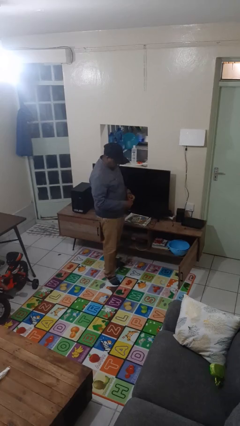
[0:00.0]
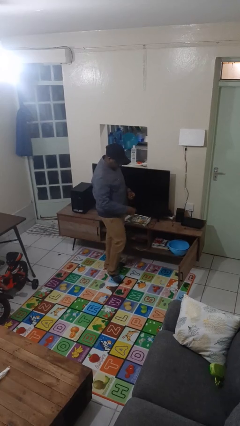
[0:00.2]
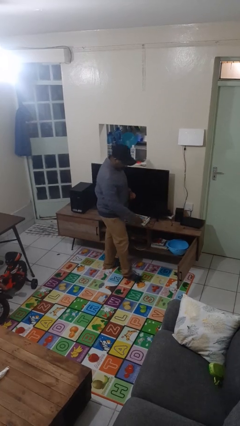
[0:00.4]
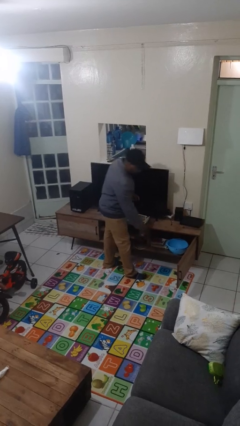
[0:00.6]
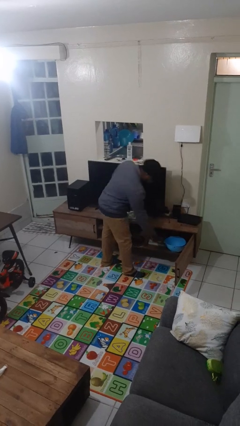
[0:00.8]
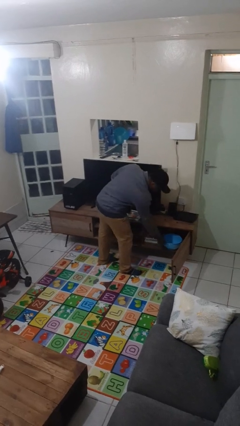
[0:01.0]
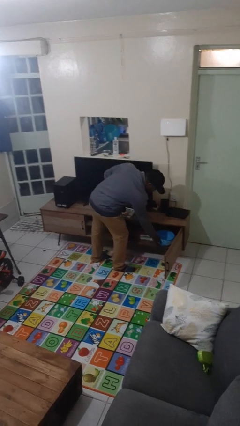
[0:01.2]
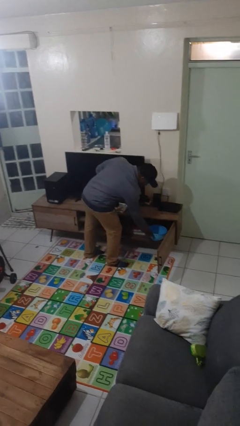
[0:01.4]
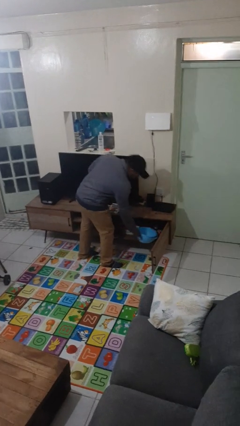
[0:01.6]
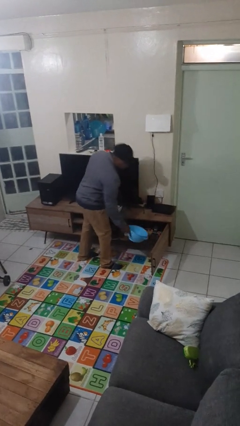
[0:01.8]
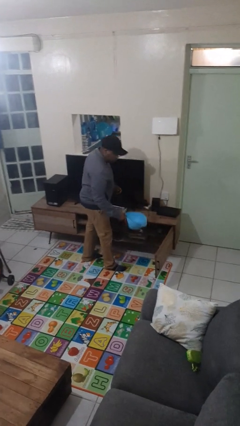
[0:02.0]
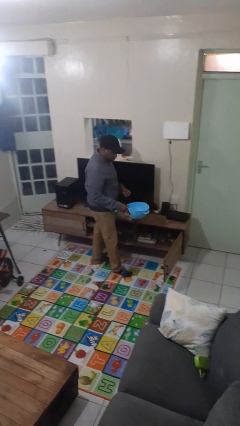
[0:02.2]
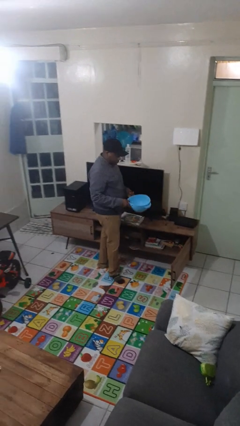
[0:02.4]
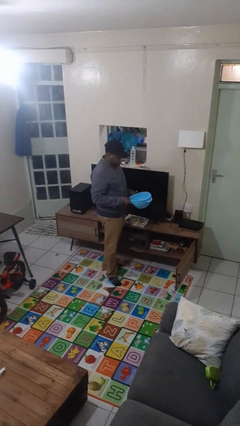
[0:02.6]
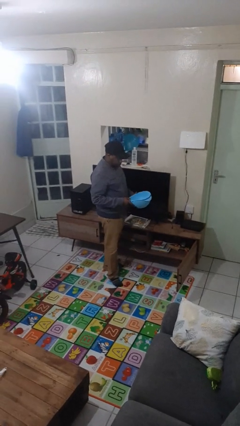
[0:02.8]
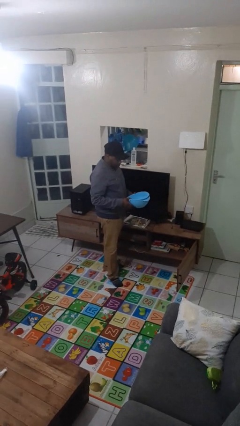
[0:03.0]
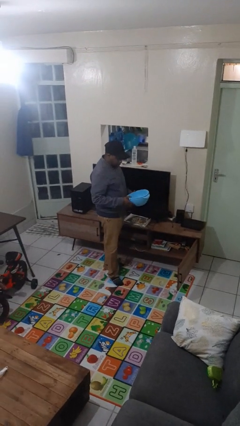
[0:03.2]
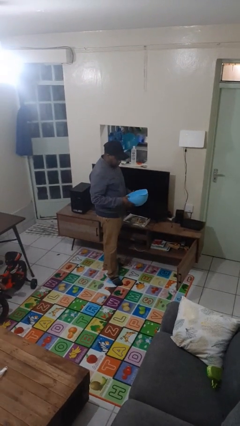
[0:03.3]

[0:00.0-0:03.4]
person picks up object from cabinet

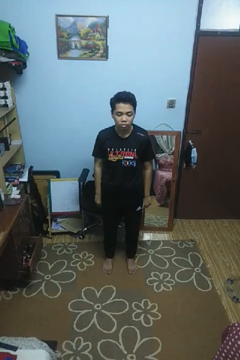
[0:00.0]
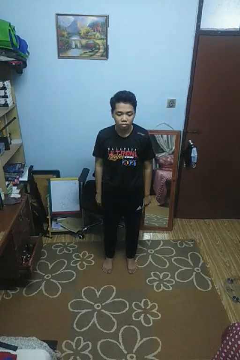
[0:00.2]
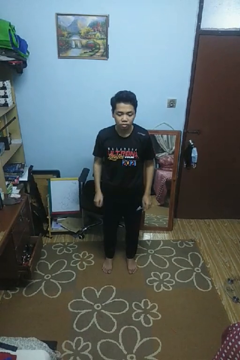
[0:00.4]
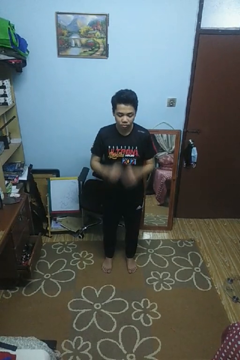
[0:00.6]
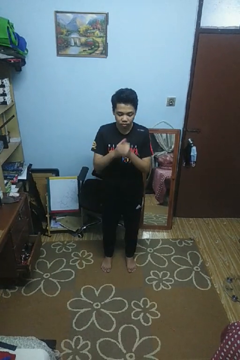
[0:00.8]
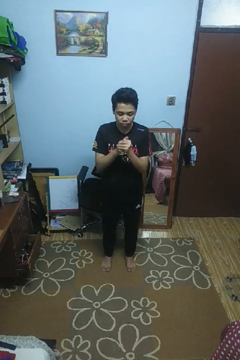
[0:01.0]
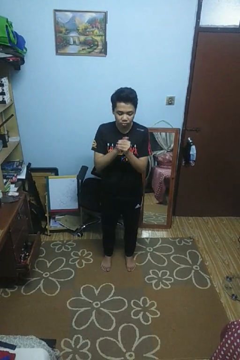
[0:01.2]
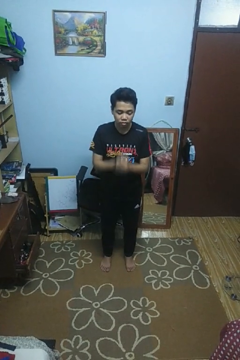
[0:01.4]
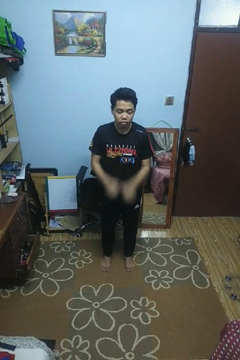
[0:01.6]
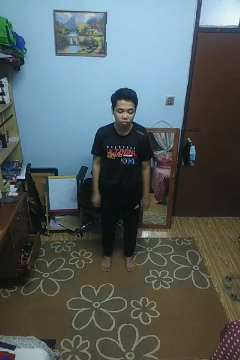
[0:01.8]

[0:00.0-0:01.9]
person cracks knuckles

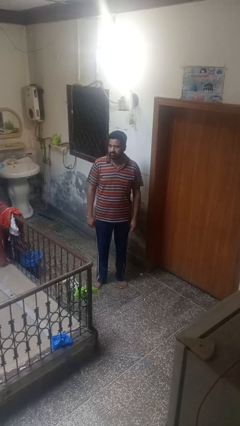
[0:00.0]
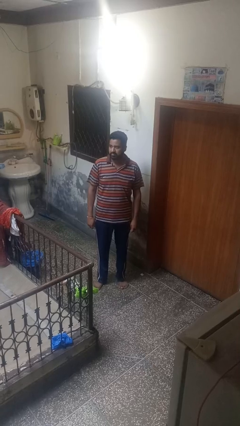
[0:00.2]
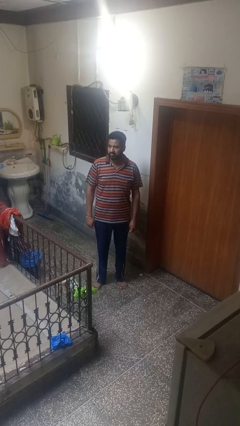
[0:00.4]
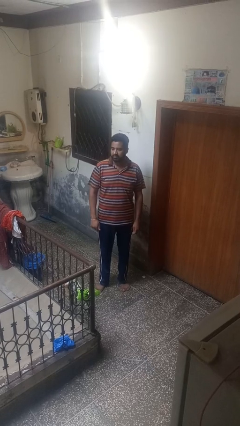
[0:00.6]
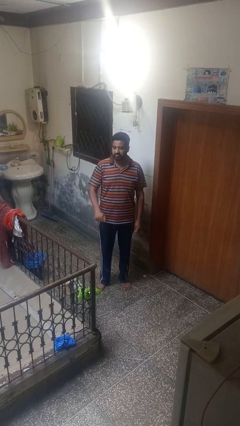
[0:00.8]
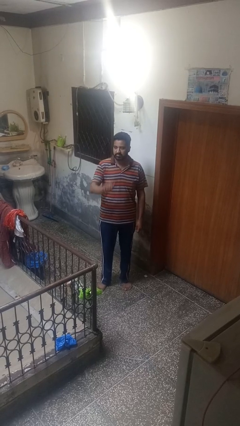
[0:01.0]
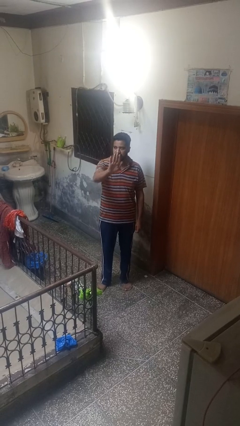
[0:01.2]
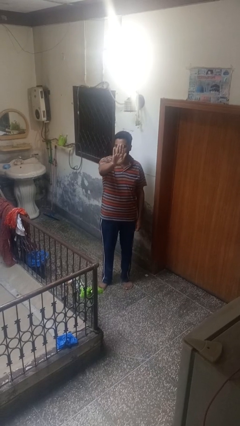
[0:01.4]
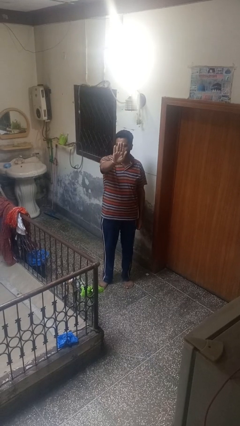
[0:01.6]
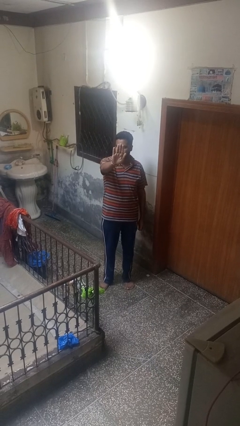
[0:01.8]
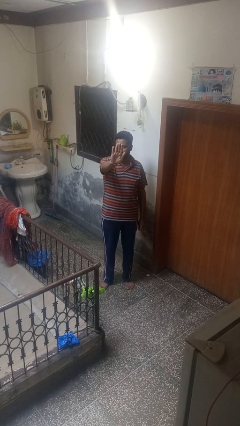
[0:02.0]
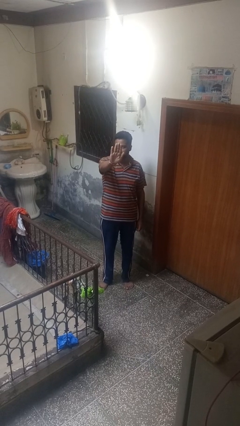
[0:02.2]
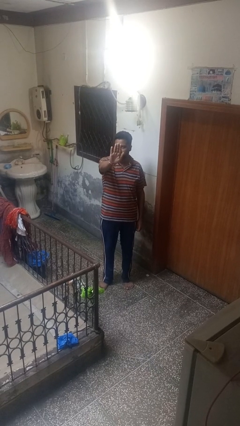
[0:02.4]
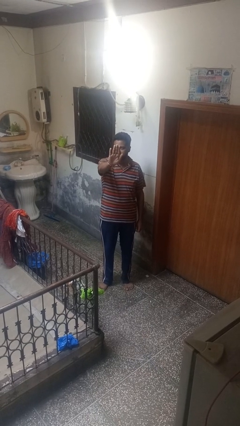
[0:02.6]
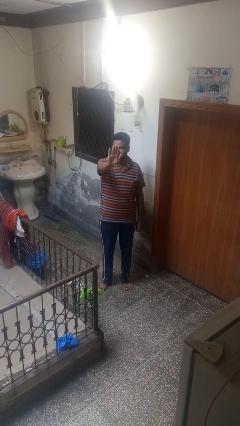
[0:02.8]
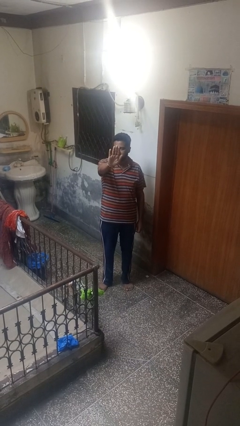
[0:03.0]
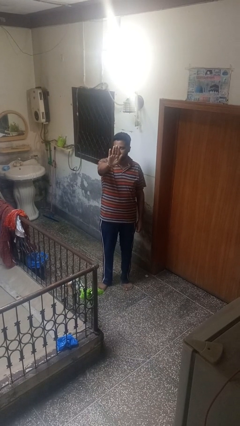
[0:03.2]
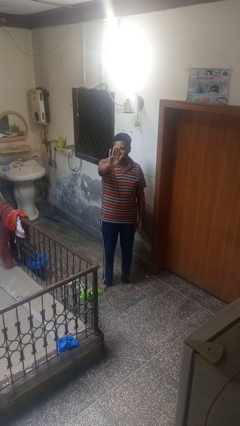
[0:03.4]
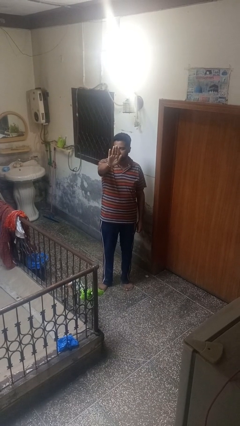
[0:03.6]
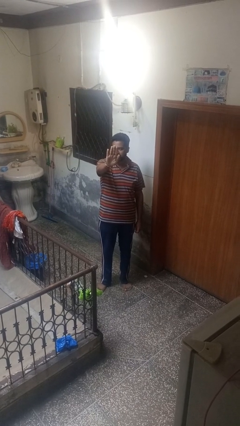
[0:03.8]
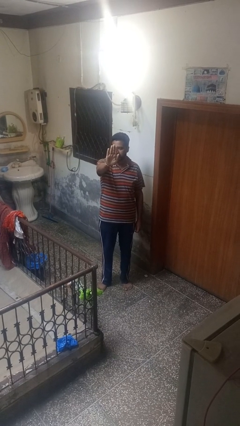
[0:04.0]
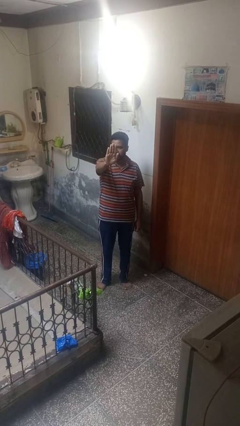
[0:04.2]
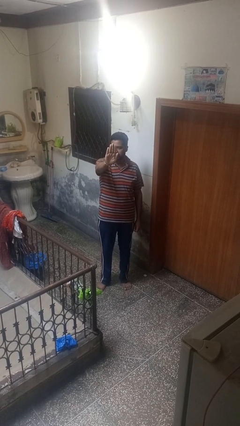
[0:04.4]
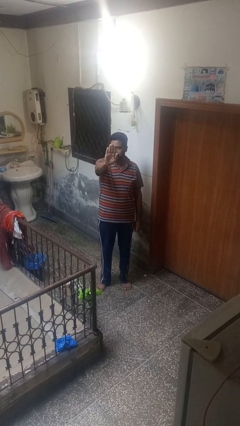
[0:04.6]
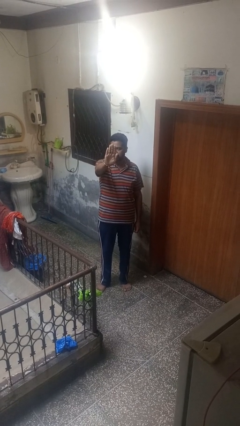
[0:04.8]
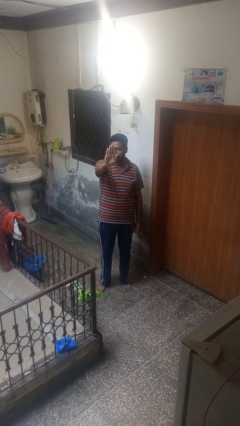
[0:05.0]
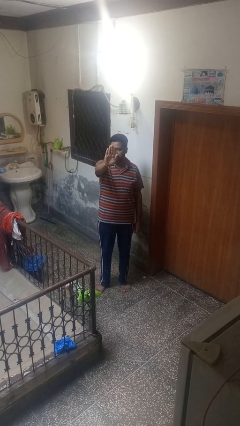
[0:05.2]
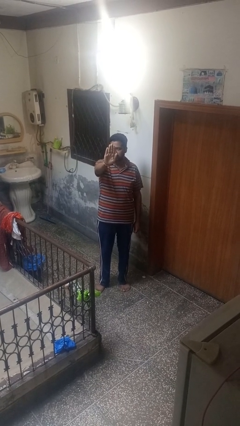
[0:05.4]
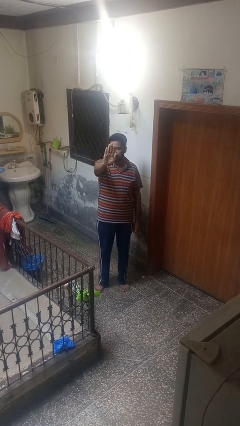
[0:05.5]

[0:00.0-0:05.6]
person gestures stop

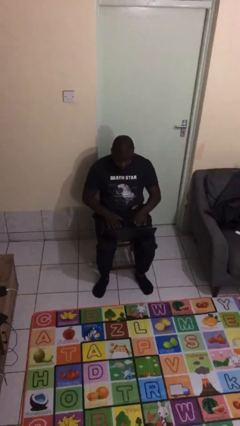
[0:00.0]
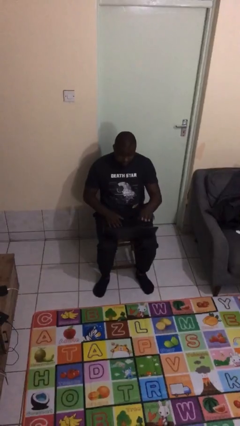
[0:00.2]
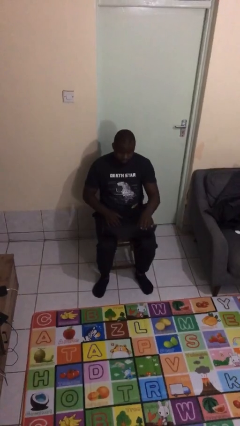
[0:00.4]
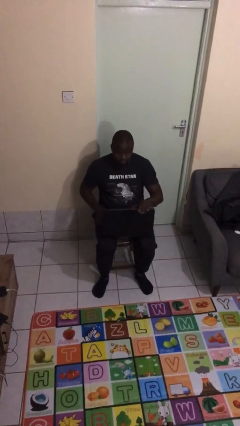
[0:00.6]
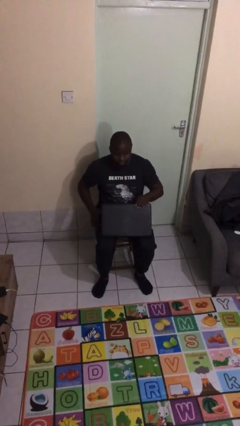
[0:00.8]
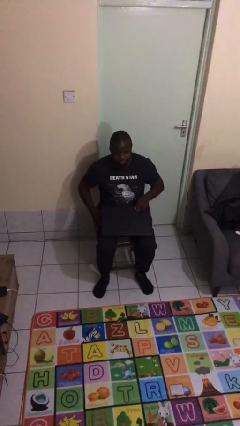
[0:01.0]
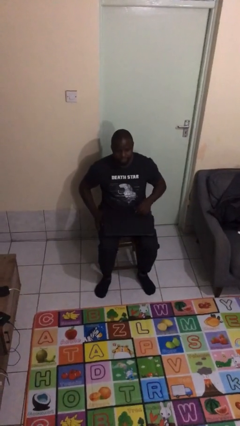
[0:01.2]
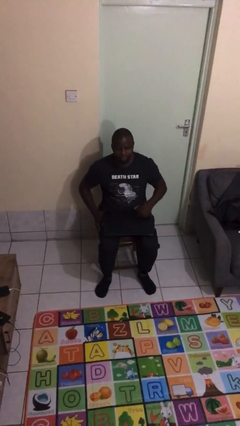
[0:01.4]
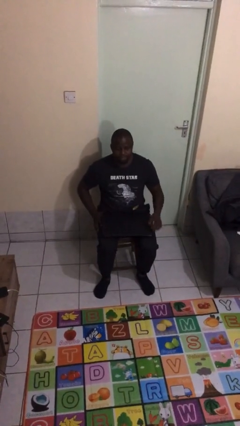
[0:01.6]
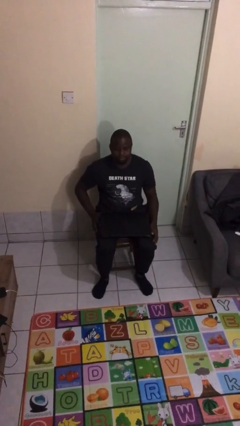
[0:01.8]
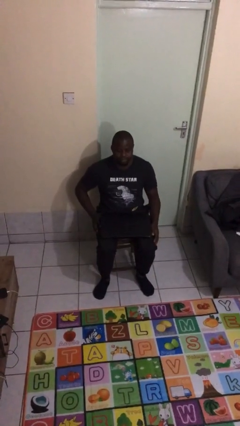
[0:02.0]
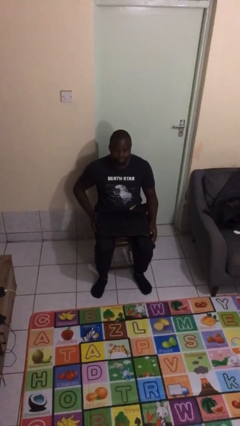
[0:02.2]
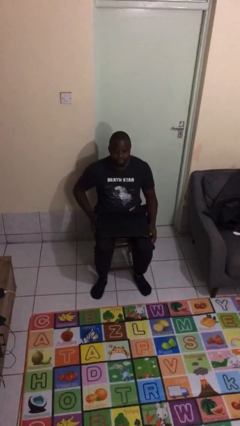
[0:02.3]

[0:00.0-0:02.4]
person closes laptop

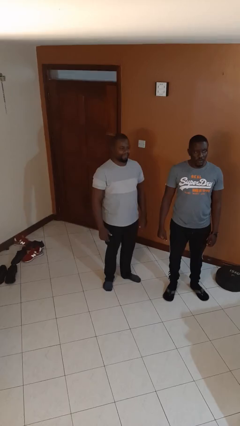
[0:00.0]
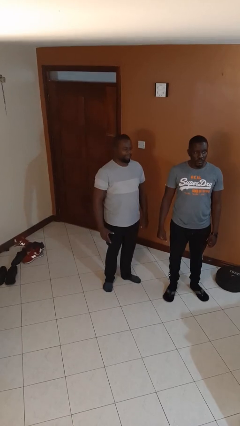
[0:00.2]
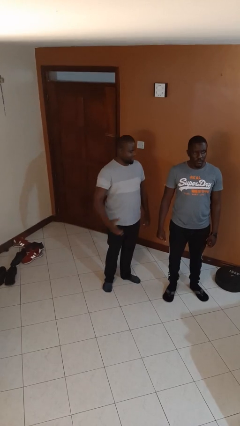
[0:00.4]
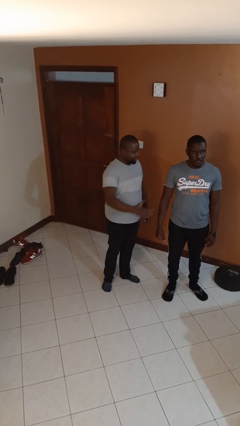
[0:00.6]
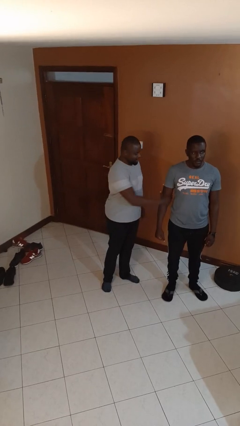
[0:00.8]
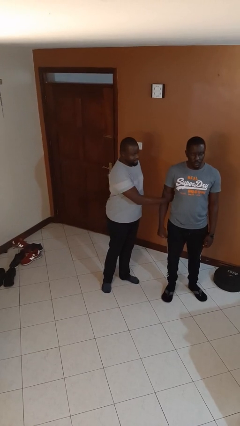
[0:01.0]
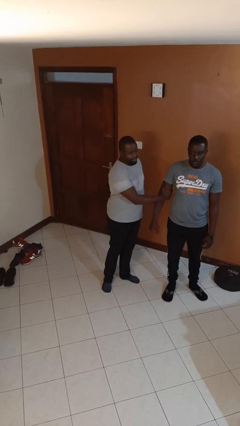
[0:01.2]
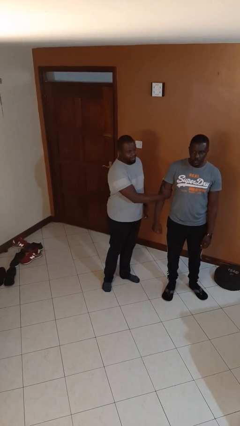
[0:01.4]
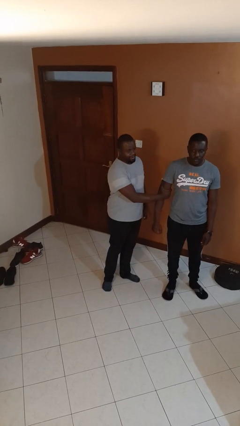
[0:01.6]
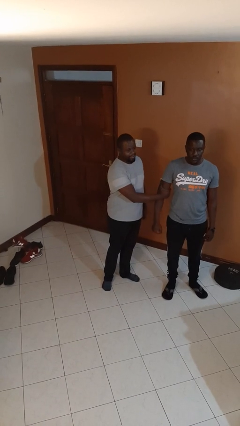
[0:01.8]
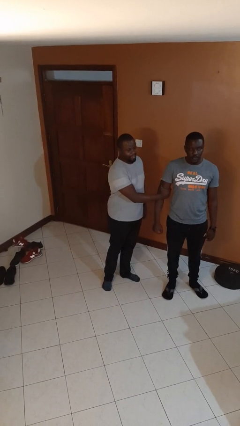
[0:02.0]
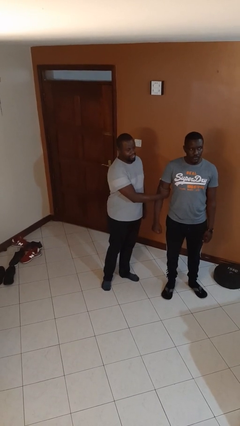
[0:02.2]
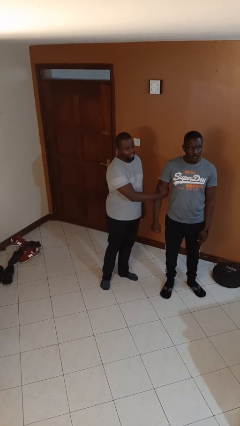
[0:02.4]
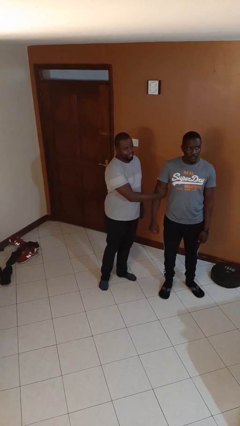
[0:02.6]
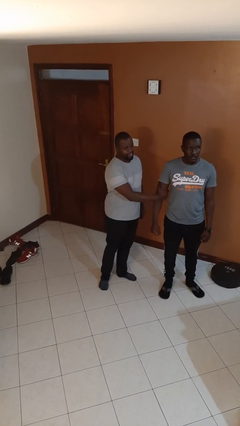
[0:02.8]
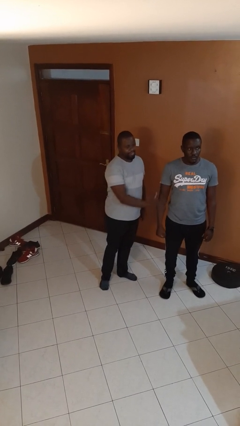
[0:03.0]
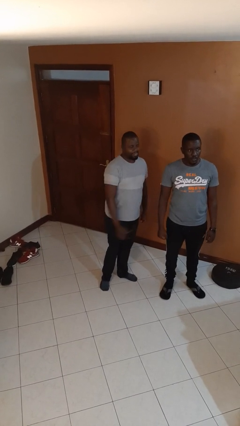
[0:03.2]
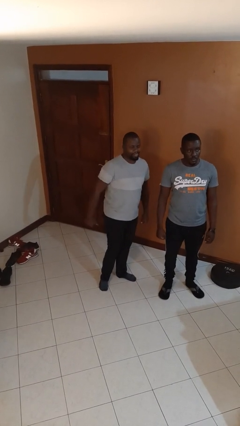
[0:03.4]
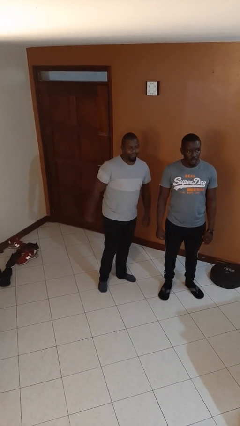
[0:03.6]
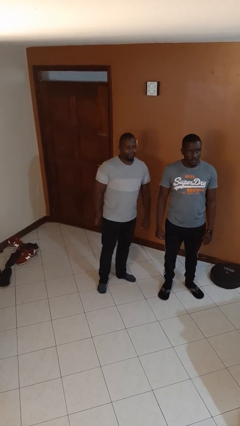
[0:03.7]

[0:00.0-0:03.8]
person grabs person by bicep

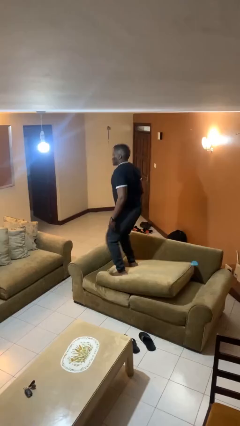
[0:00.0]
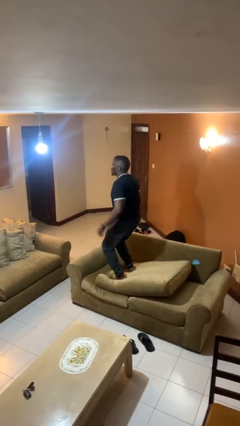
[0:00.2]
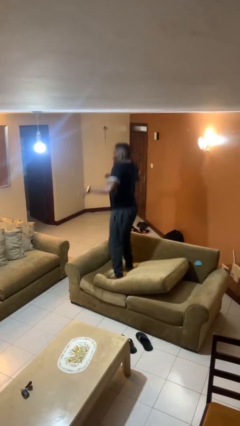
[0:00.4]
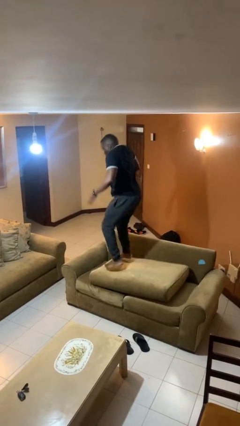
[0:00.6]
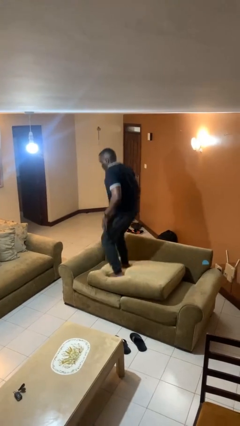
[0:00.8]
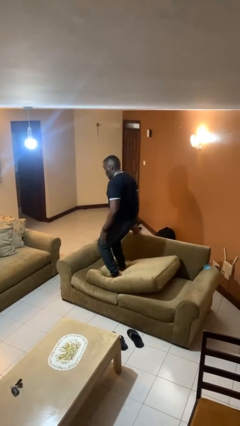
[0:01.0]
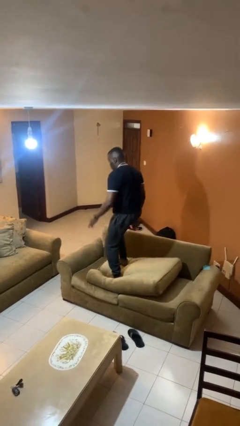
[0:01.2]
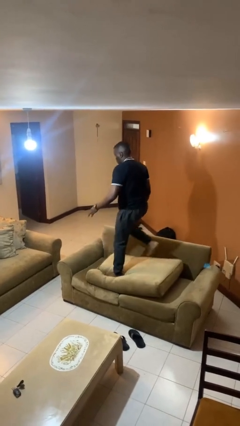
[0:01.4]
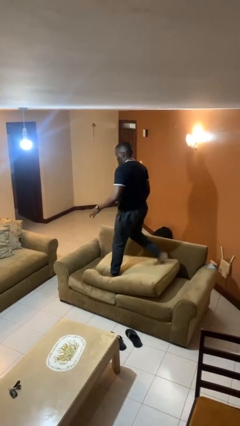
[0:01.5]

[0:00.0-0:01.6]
person jumps on couch
